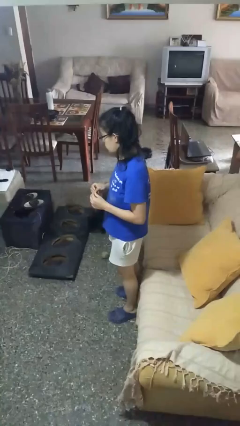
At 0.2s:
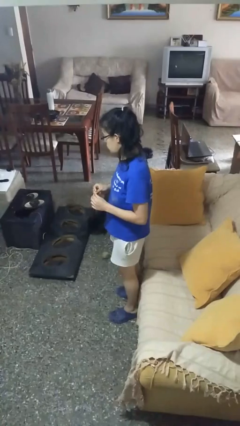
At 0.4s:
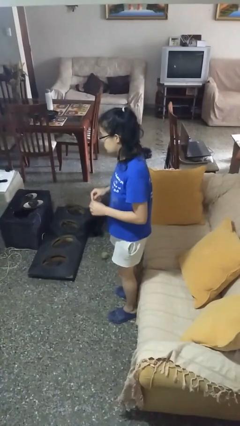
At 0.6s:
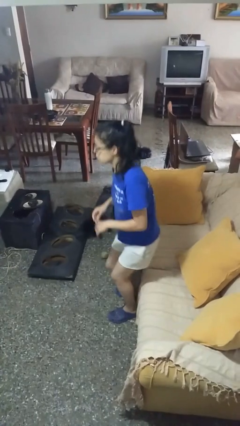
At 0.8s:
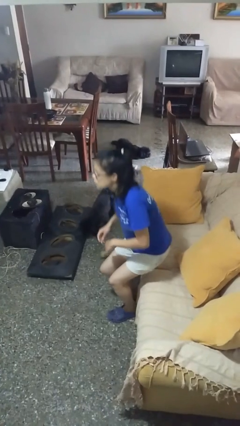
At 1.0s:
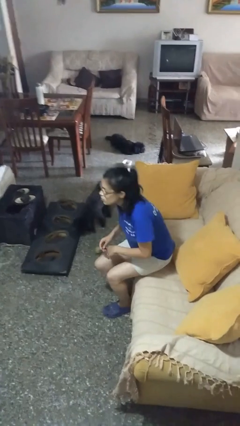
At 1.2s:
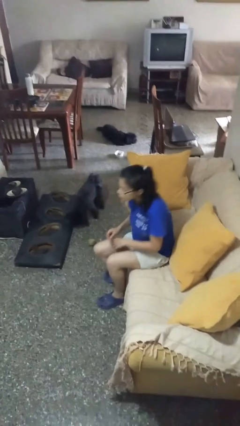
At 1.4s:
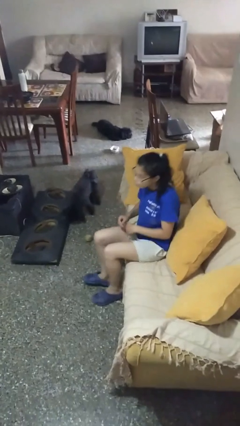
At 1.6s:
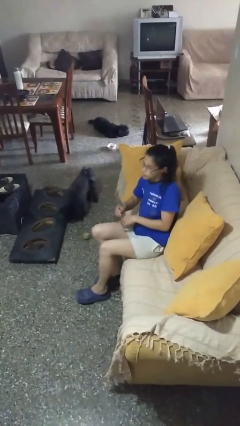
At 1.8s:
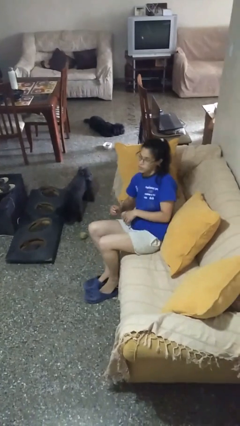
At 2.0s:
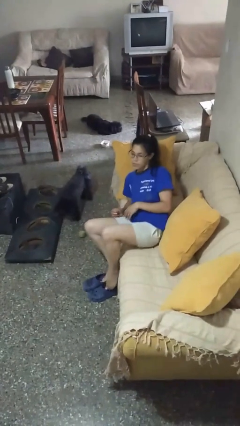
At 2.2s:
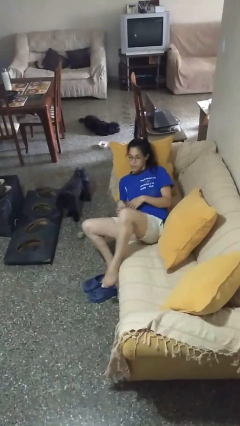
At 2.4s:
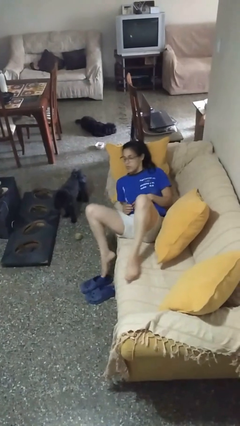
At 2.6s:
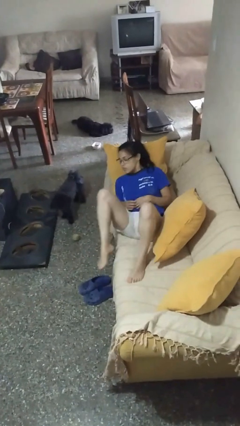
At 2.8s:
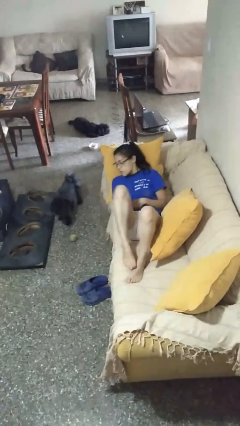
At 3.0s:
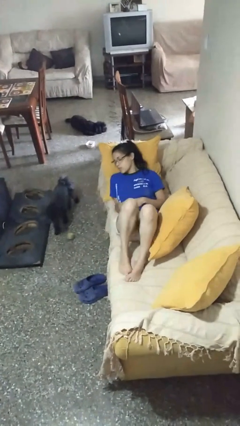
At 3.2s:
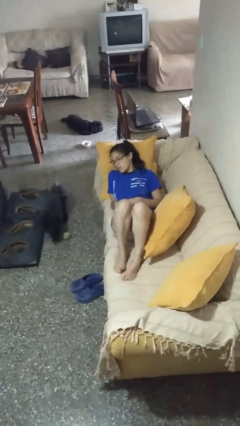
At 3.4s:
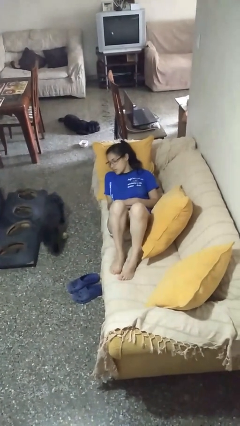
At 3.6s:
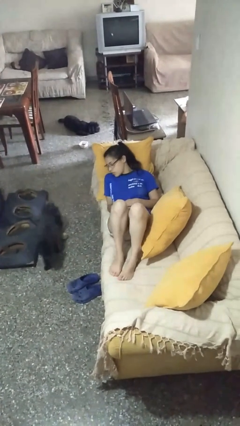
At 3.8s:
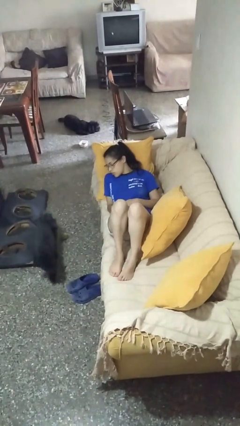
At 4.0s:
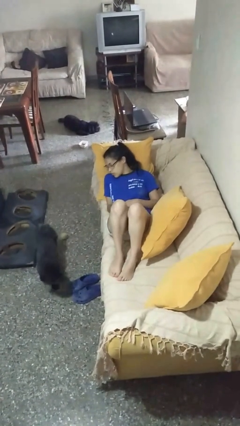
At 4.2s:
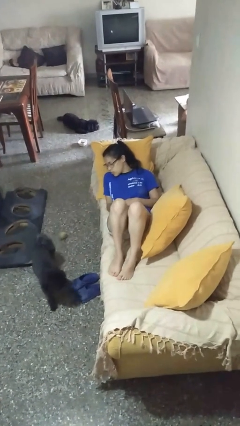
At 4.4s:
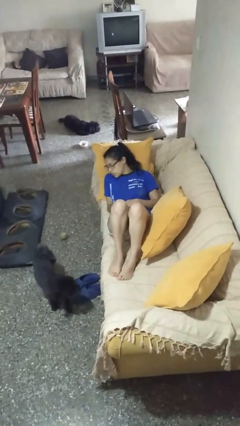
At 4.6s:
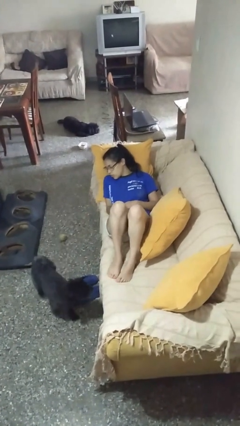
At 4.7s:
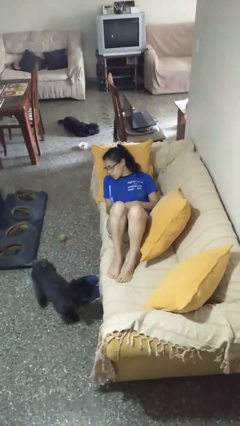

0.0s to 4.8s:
person lies down on couch

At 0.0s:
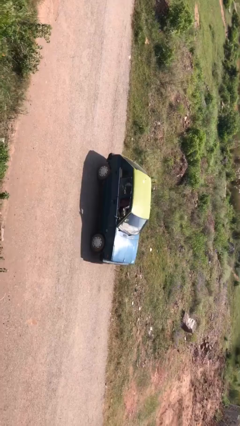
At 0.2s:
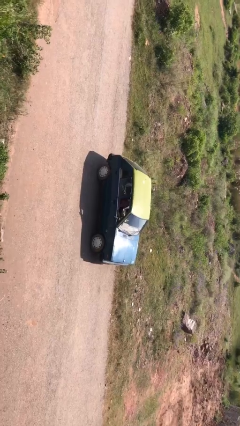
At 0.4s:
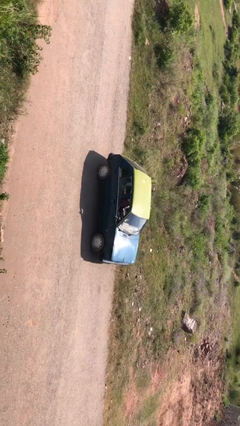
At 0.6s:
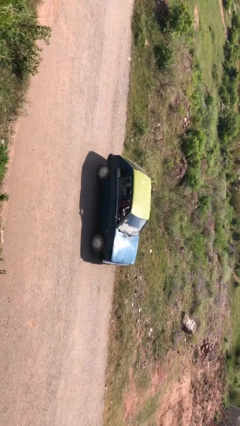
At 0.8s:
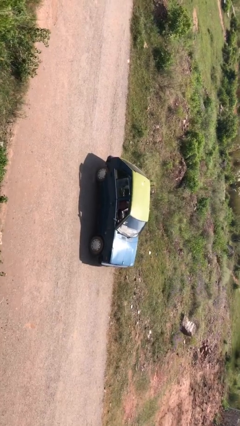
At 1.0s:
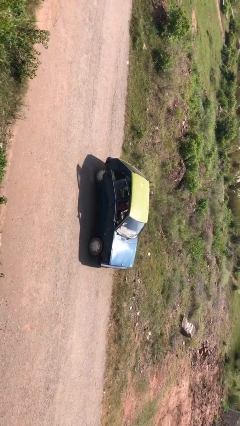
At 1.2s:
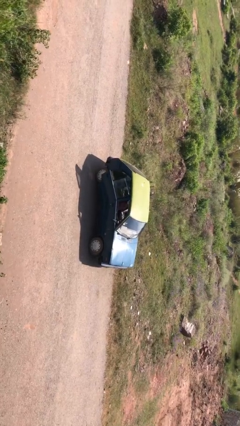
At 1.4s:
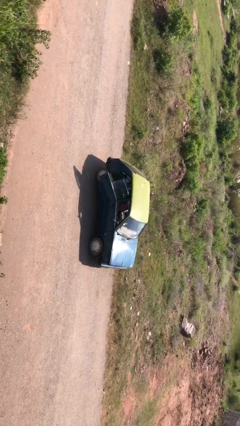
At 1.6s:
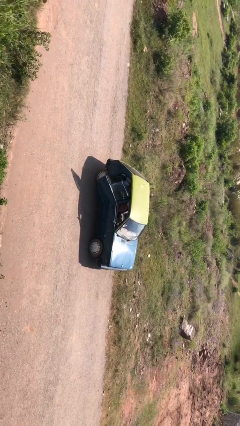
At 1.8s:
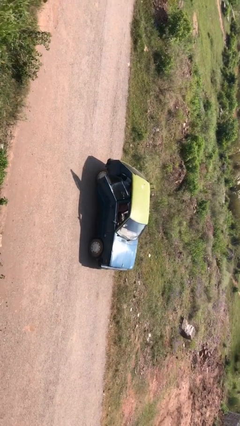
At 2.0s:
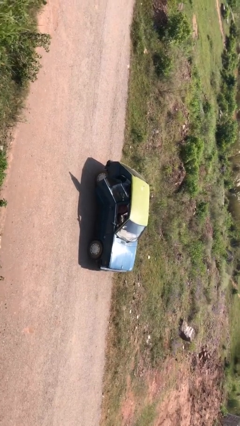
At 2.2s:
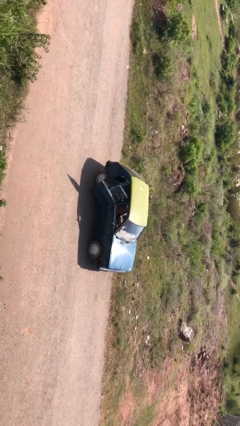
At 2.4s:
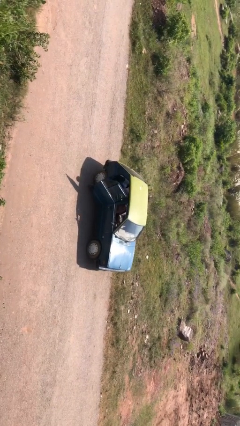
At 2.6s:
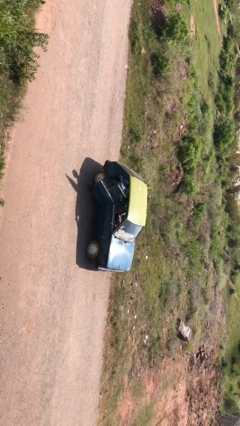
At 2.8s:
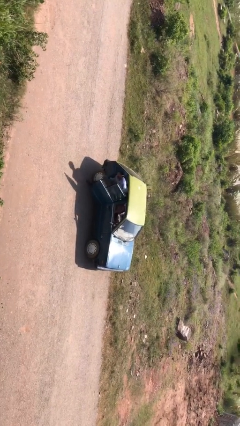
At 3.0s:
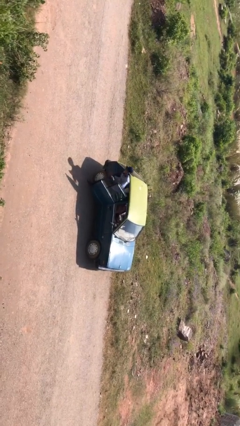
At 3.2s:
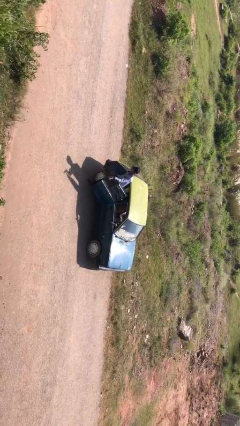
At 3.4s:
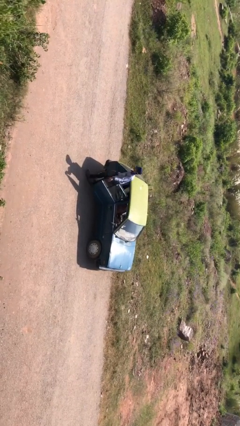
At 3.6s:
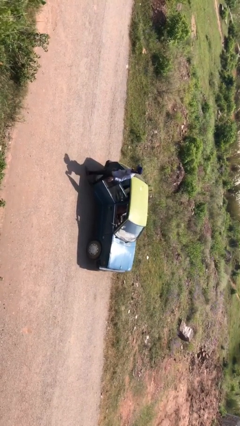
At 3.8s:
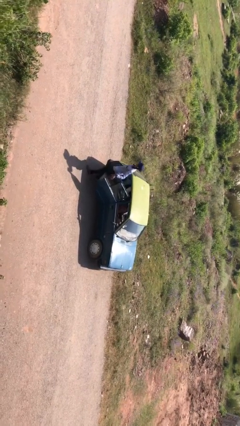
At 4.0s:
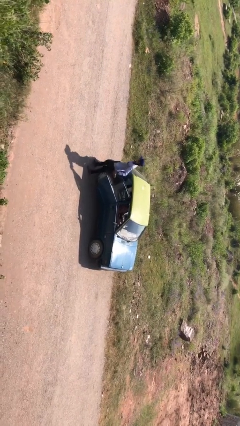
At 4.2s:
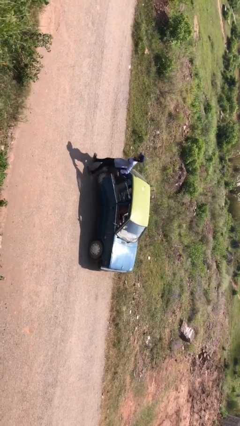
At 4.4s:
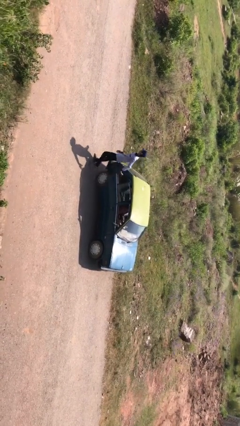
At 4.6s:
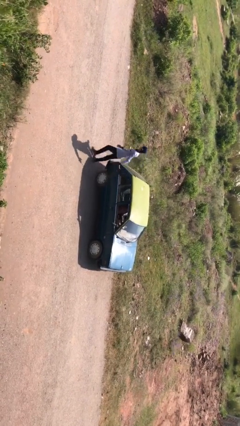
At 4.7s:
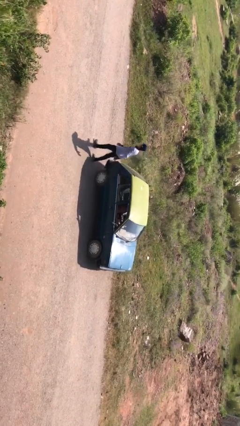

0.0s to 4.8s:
car drops off person

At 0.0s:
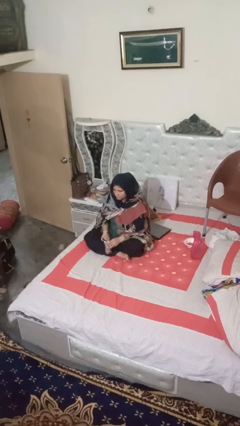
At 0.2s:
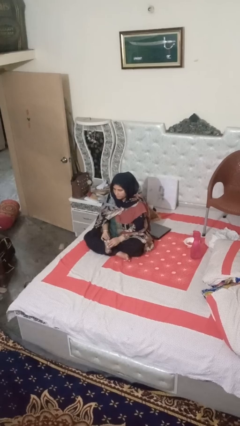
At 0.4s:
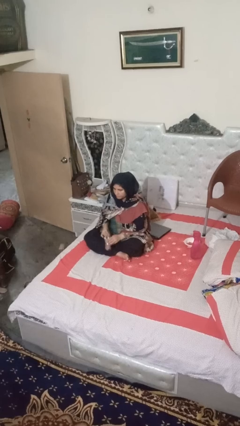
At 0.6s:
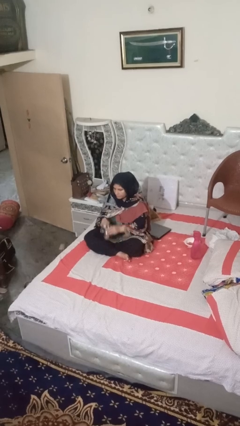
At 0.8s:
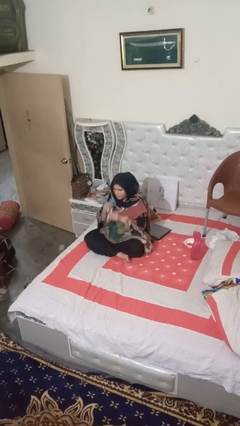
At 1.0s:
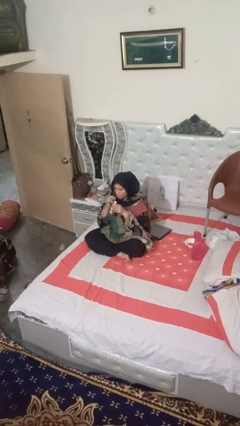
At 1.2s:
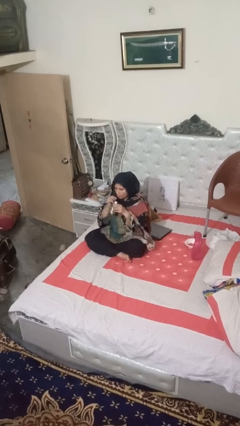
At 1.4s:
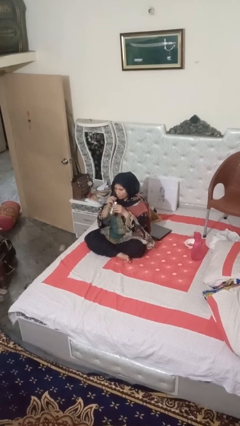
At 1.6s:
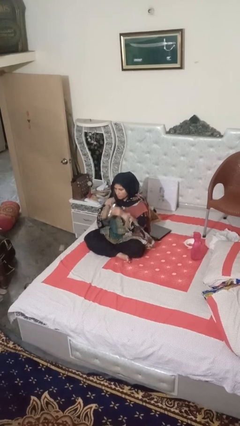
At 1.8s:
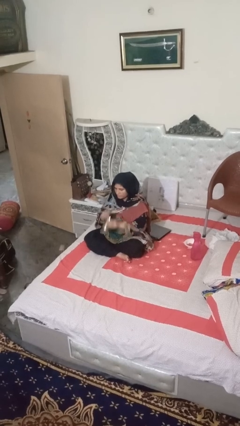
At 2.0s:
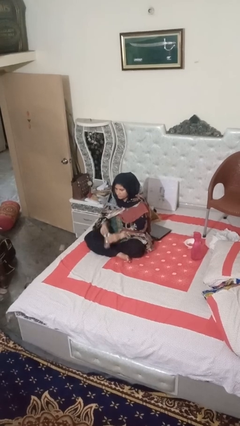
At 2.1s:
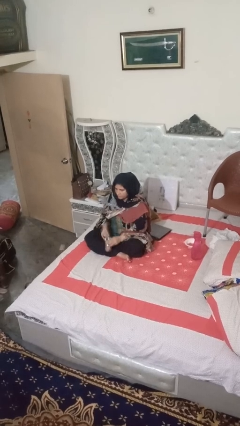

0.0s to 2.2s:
person drinks from straw

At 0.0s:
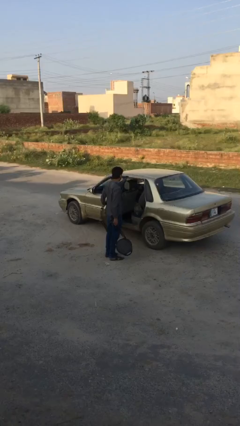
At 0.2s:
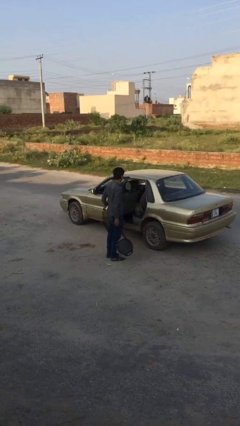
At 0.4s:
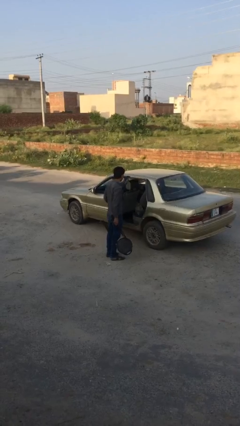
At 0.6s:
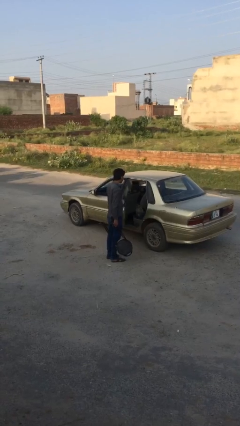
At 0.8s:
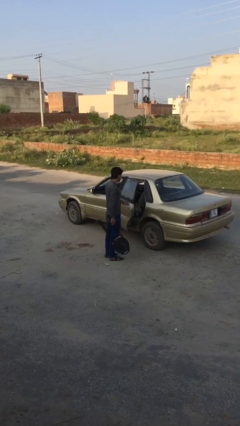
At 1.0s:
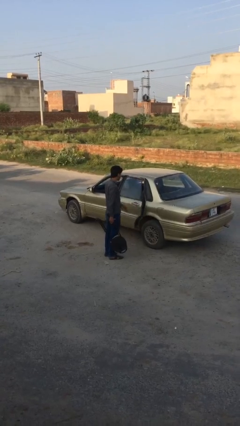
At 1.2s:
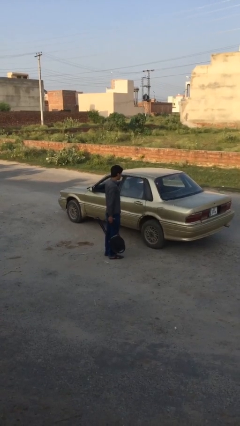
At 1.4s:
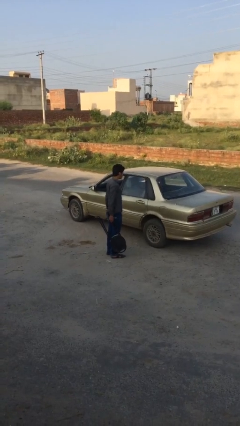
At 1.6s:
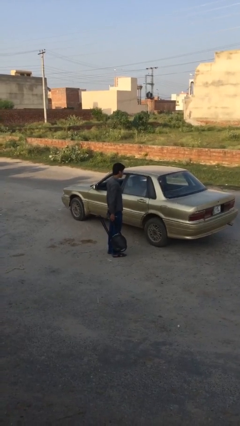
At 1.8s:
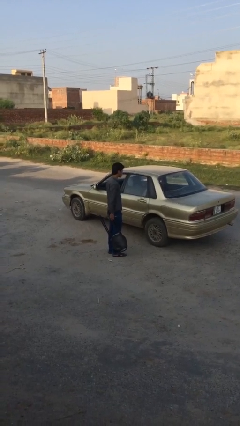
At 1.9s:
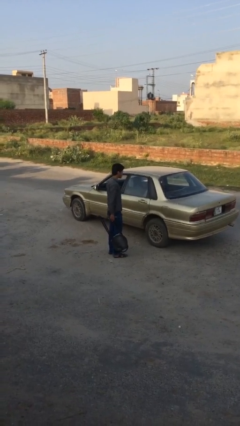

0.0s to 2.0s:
person closes car door

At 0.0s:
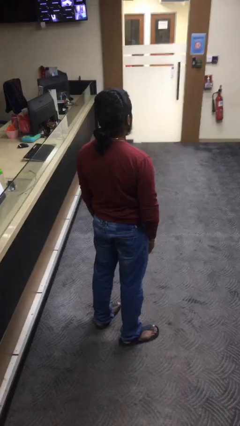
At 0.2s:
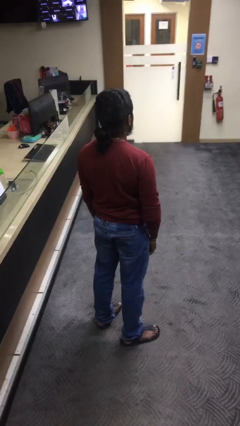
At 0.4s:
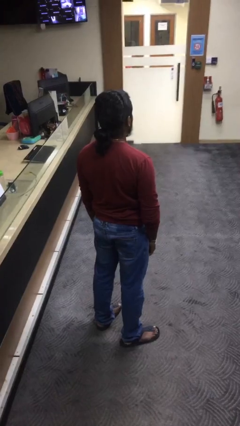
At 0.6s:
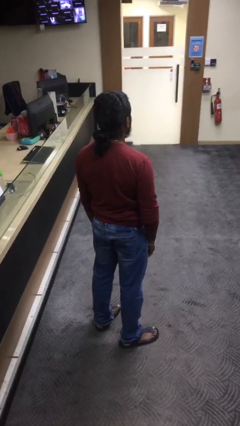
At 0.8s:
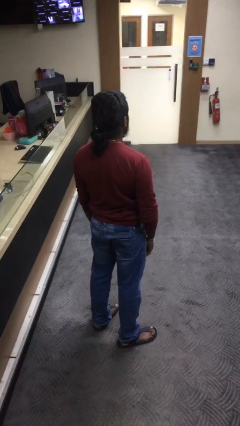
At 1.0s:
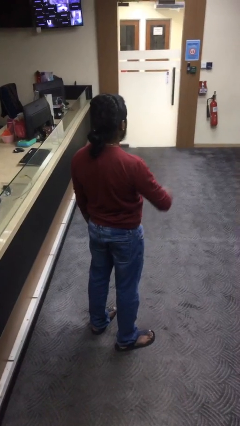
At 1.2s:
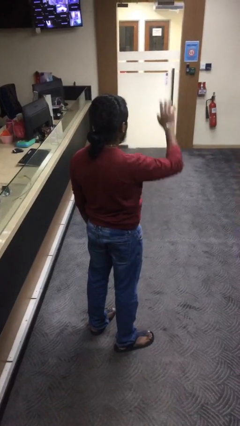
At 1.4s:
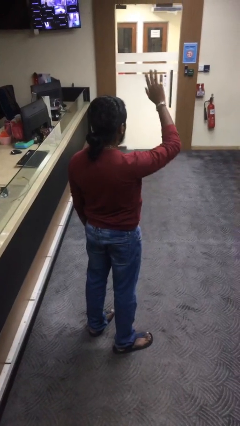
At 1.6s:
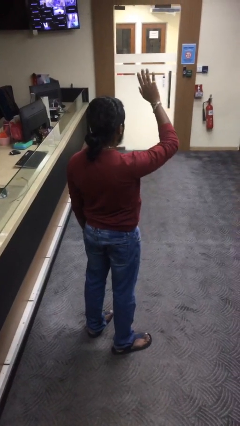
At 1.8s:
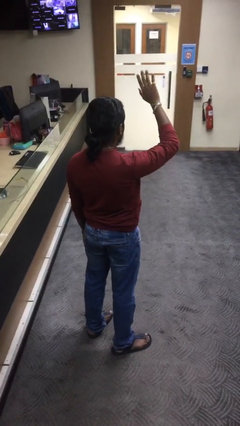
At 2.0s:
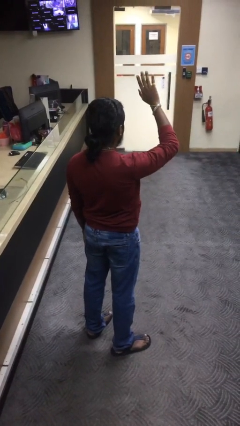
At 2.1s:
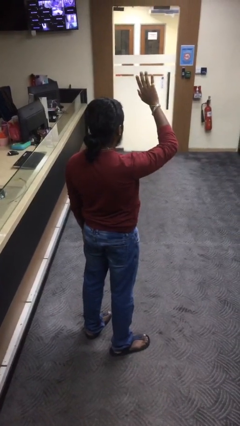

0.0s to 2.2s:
person gestures raise hand

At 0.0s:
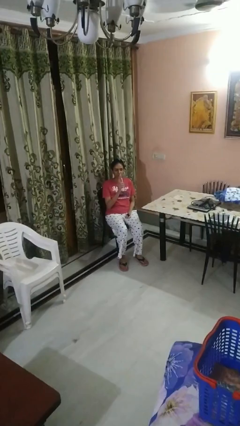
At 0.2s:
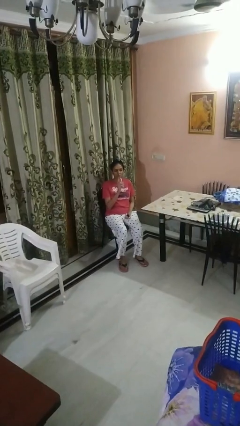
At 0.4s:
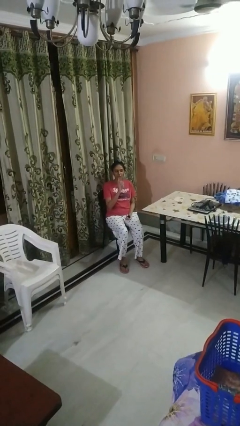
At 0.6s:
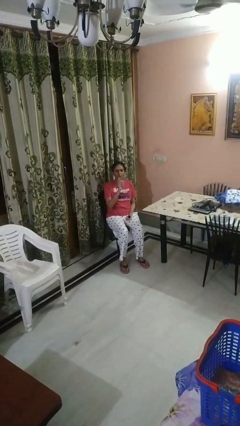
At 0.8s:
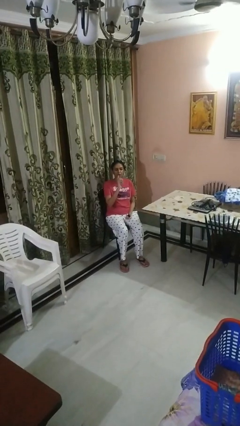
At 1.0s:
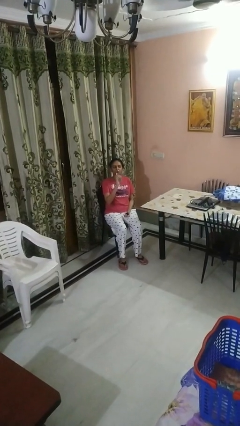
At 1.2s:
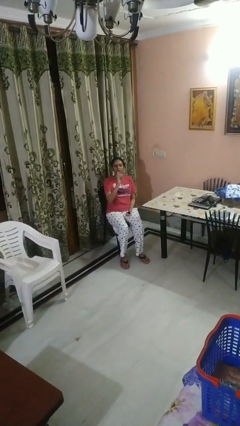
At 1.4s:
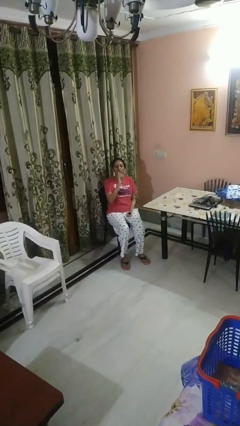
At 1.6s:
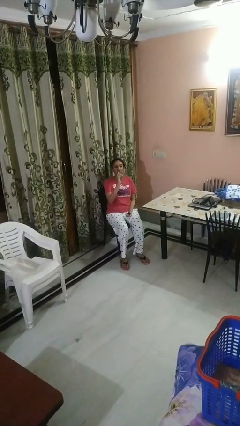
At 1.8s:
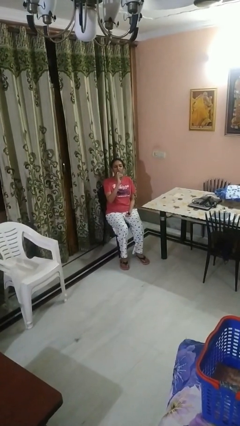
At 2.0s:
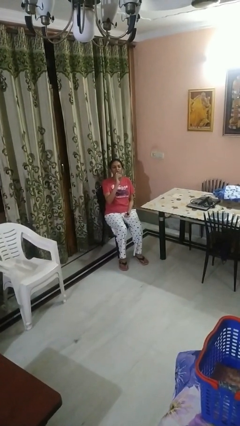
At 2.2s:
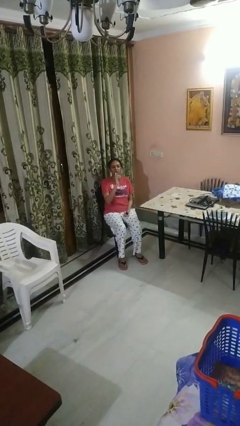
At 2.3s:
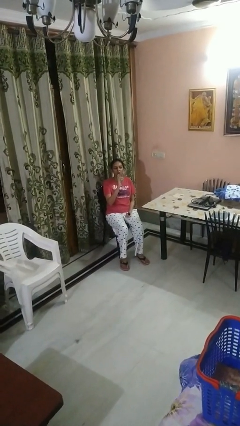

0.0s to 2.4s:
person drinks from bottle
